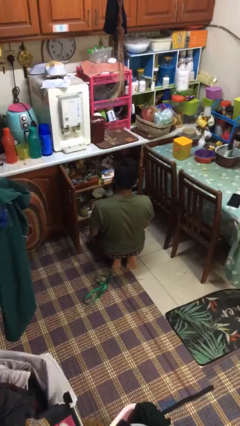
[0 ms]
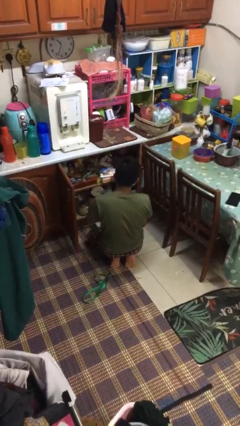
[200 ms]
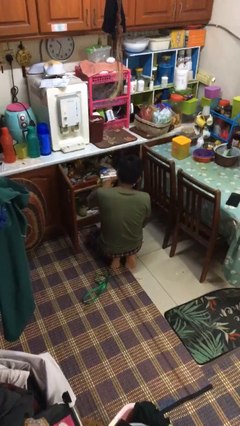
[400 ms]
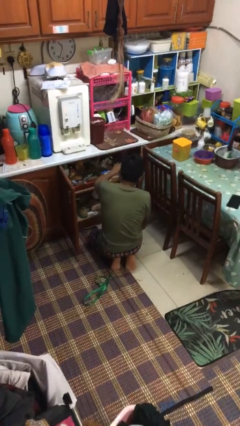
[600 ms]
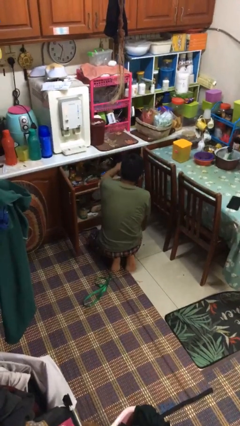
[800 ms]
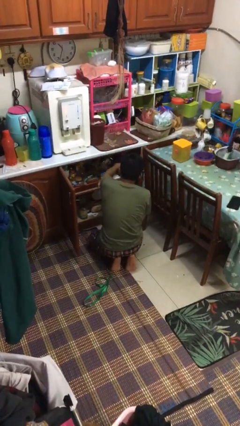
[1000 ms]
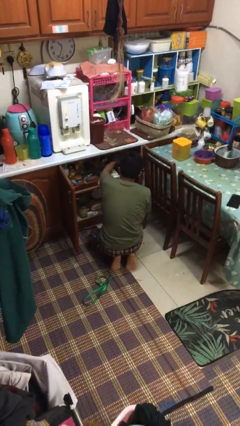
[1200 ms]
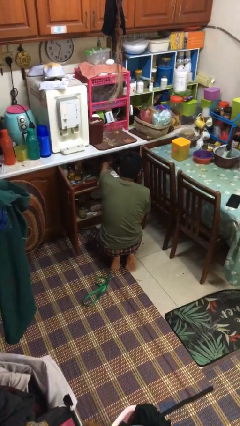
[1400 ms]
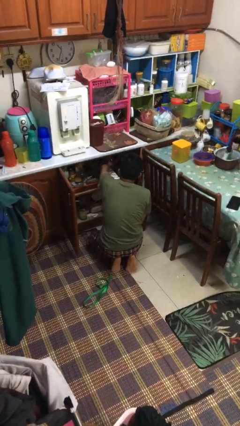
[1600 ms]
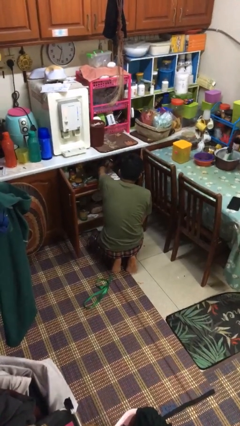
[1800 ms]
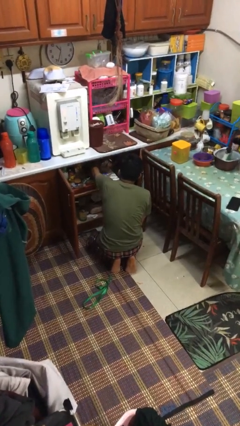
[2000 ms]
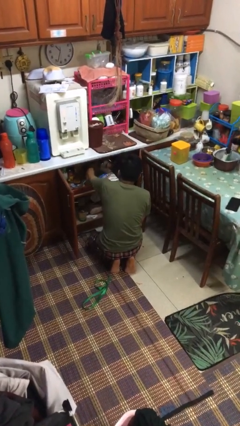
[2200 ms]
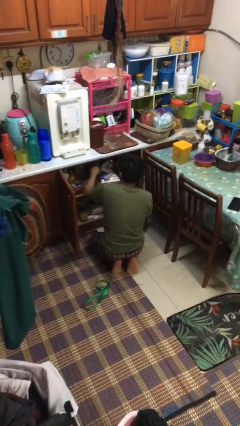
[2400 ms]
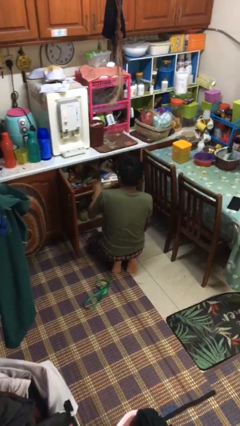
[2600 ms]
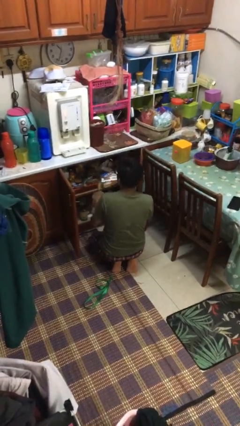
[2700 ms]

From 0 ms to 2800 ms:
person searches in kitchen drawer

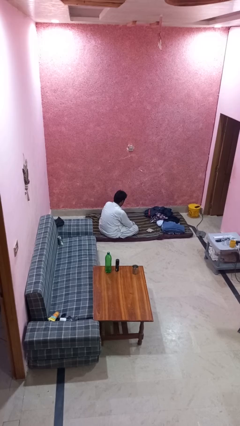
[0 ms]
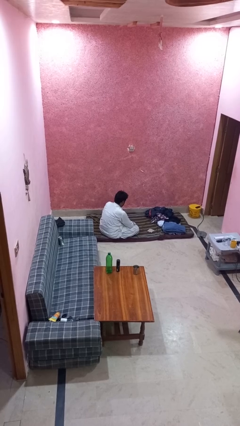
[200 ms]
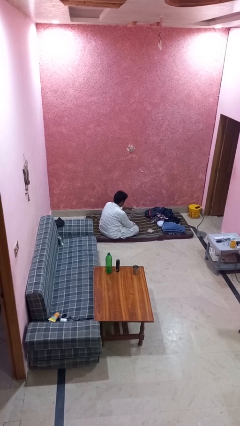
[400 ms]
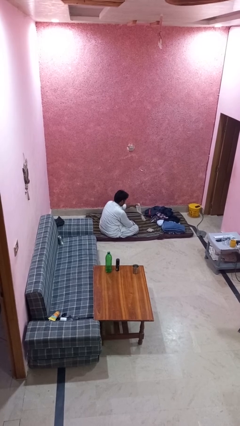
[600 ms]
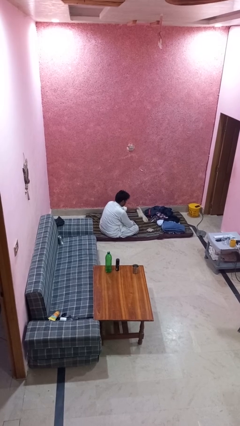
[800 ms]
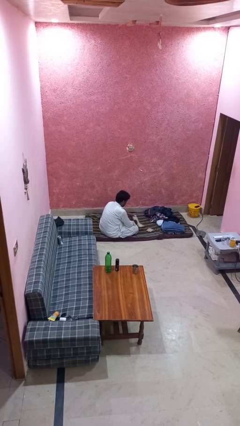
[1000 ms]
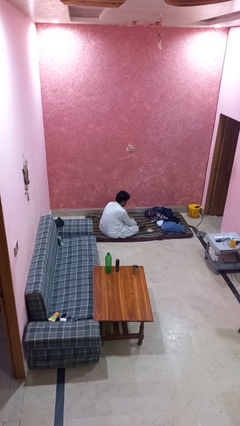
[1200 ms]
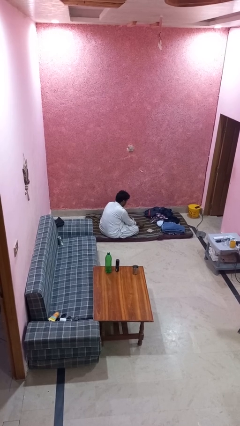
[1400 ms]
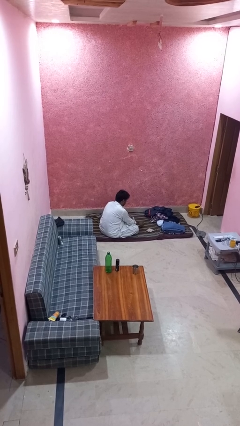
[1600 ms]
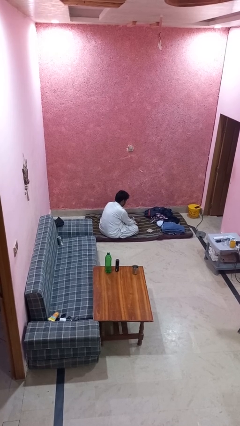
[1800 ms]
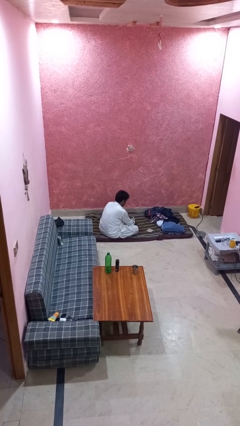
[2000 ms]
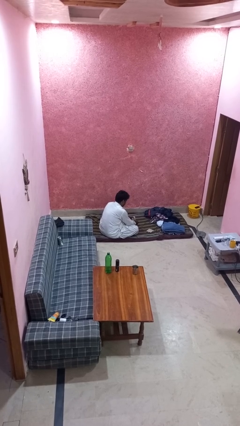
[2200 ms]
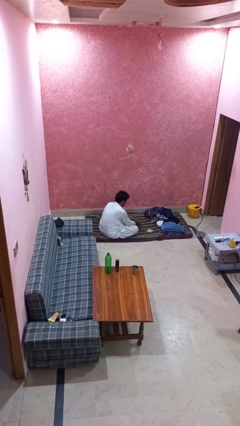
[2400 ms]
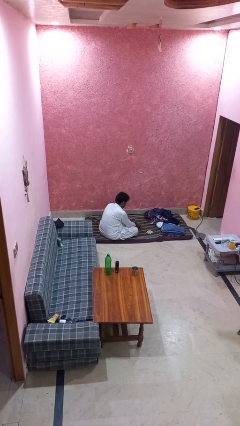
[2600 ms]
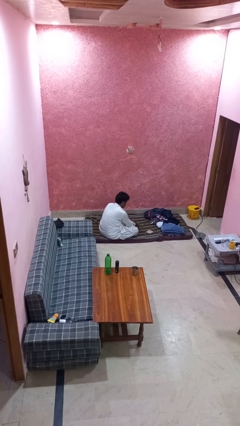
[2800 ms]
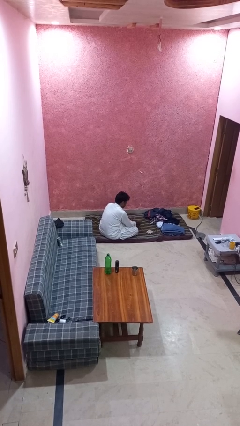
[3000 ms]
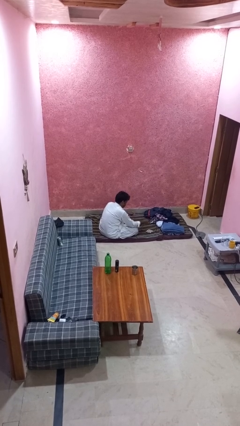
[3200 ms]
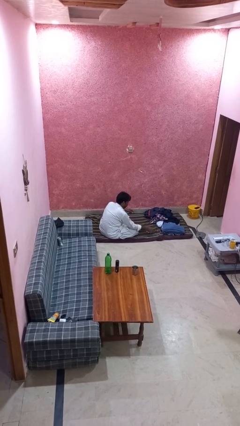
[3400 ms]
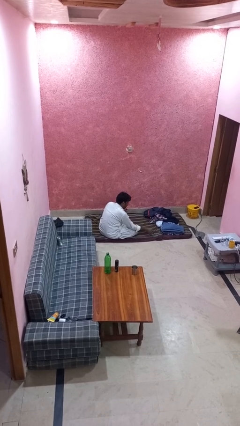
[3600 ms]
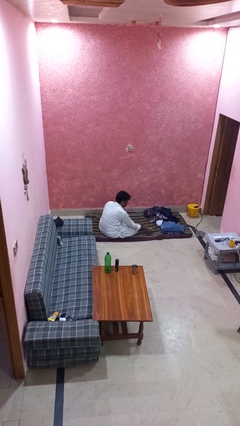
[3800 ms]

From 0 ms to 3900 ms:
person folds socks

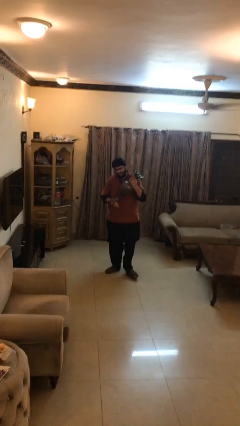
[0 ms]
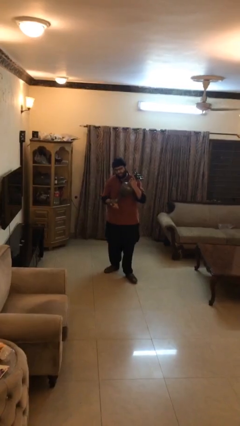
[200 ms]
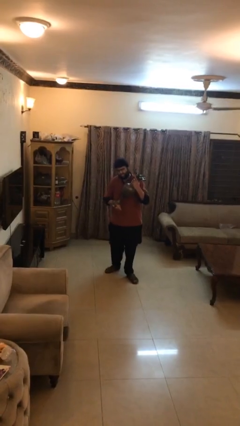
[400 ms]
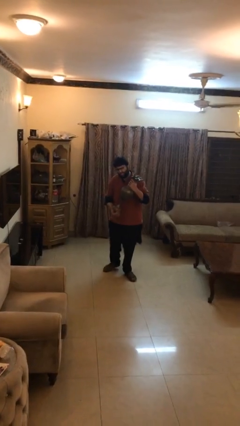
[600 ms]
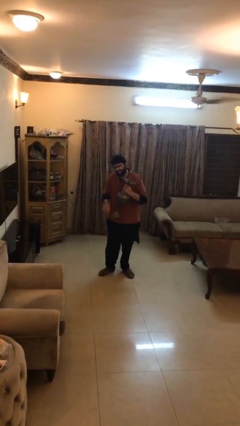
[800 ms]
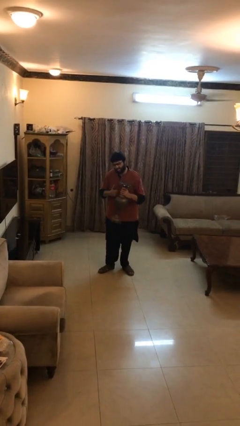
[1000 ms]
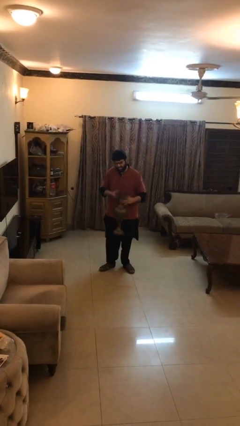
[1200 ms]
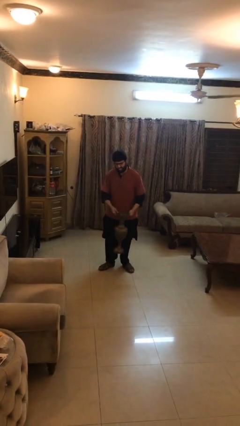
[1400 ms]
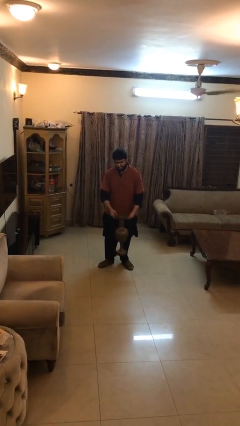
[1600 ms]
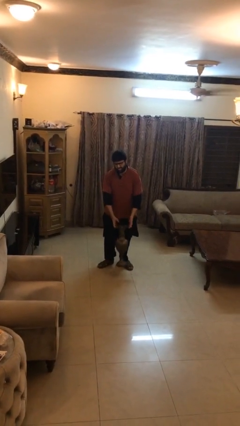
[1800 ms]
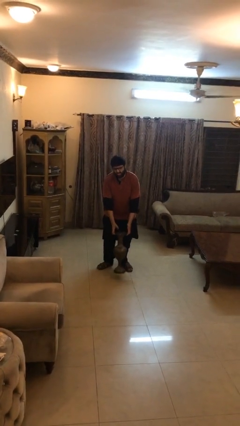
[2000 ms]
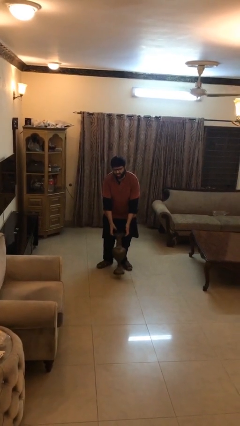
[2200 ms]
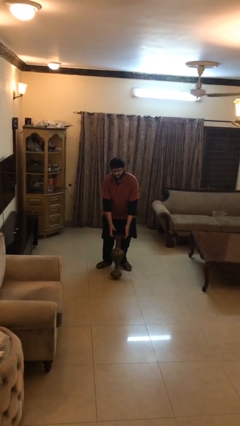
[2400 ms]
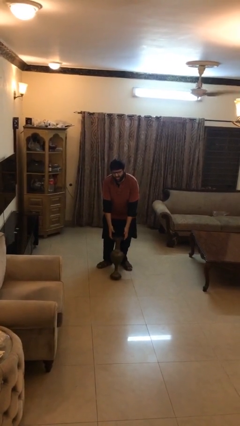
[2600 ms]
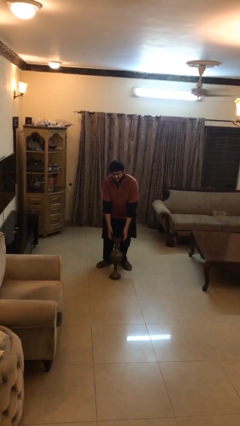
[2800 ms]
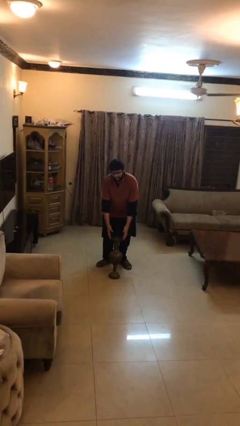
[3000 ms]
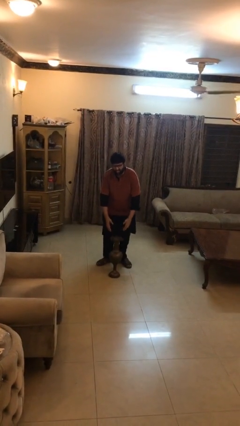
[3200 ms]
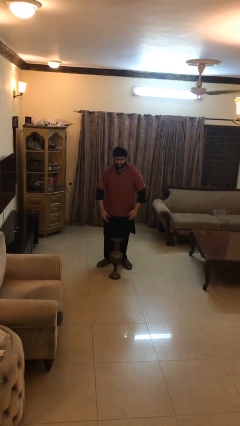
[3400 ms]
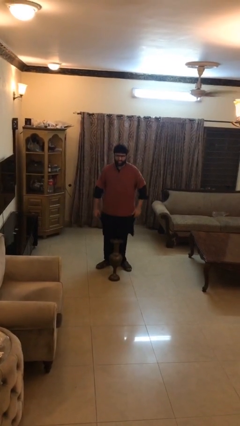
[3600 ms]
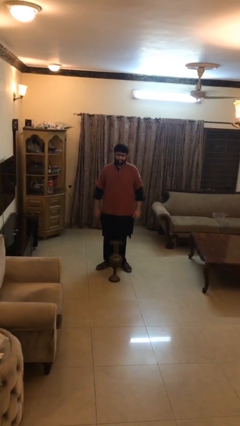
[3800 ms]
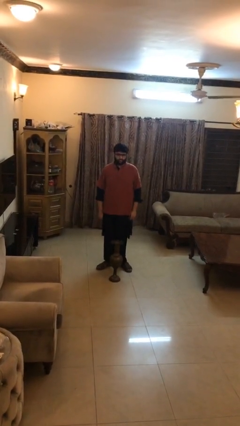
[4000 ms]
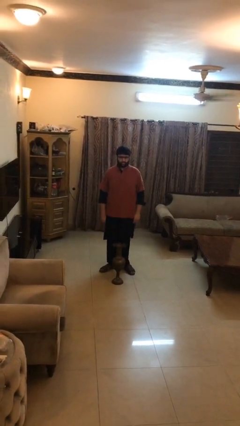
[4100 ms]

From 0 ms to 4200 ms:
person puts down object on floor

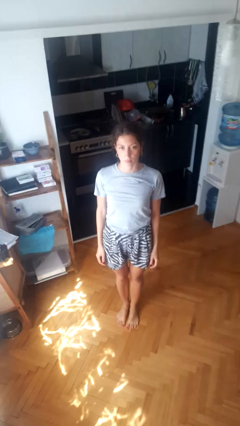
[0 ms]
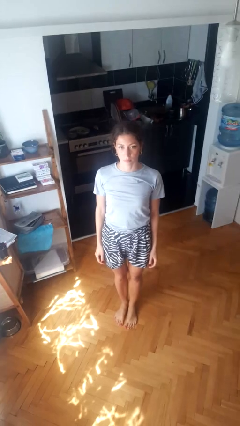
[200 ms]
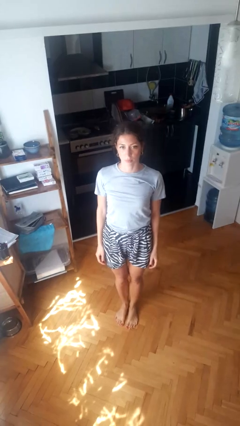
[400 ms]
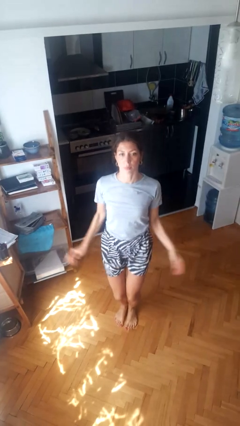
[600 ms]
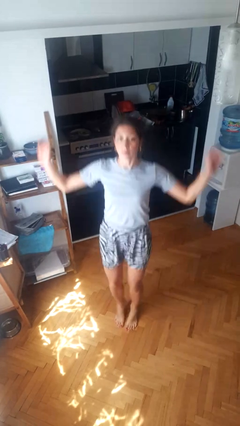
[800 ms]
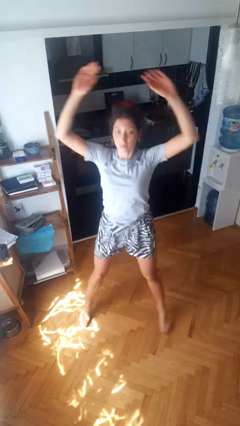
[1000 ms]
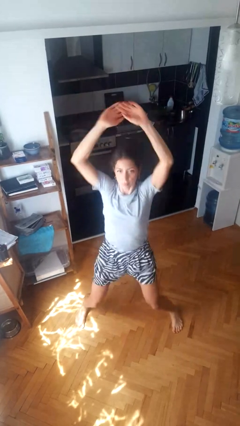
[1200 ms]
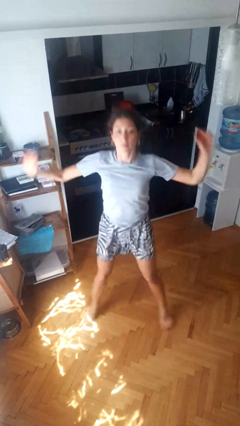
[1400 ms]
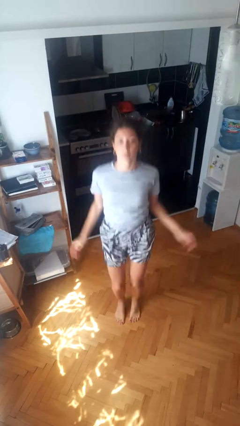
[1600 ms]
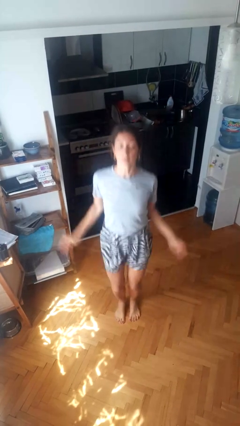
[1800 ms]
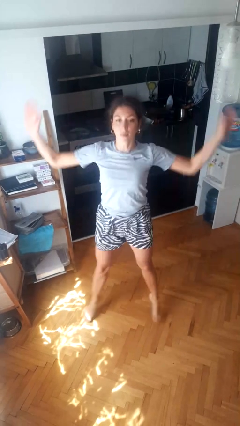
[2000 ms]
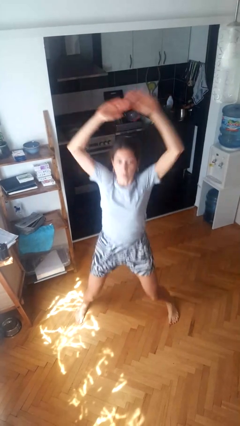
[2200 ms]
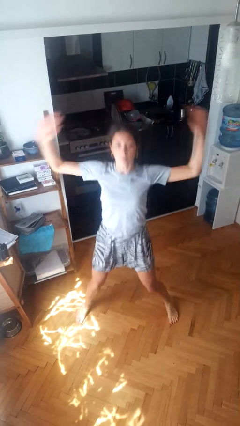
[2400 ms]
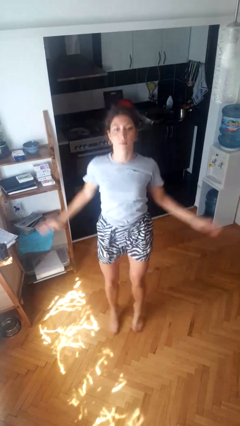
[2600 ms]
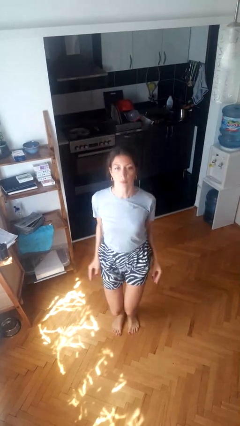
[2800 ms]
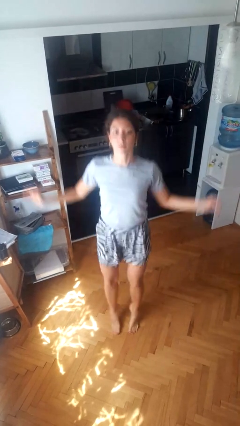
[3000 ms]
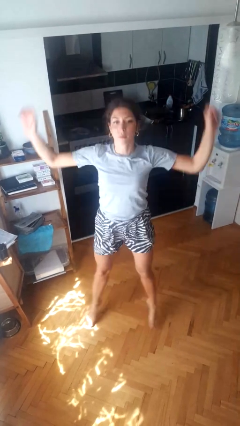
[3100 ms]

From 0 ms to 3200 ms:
person exercises with jumping jacks

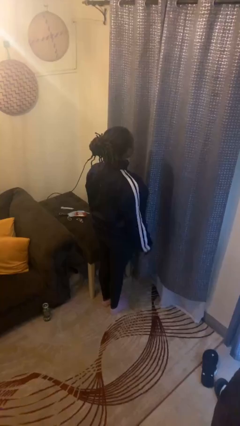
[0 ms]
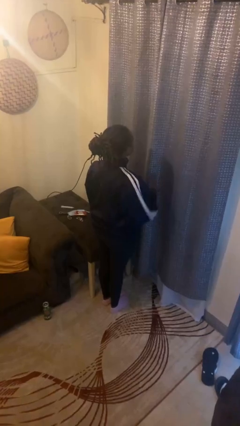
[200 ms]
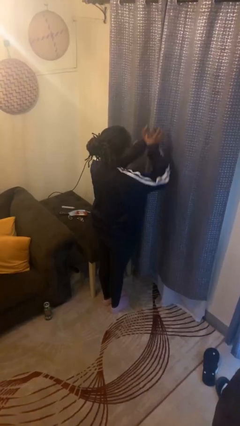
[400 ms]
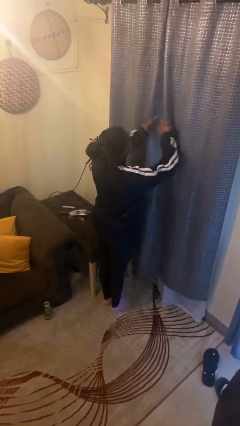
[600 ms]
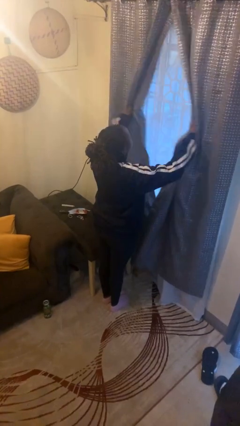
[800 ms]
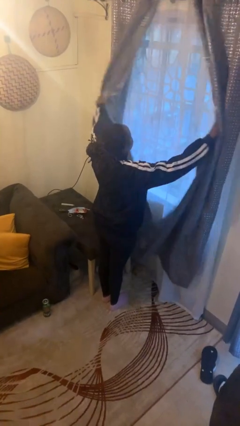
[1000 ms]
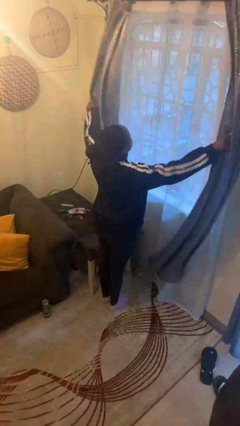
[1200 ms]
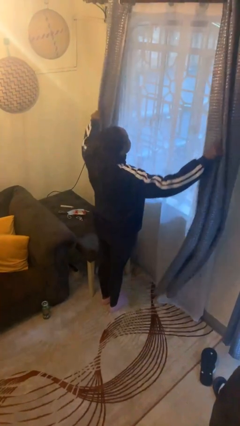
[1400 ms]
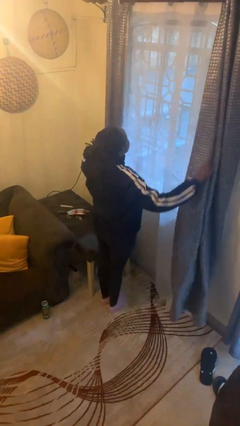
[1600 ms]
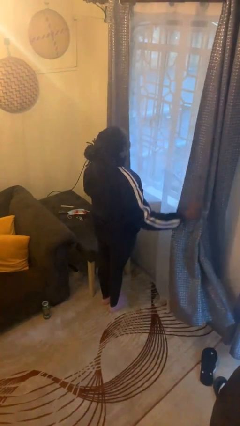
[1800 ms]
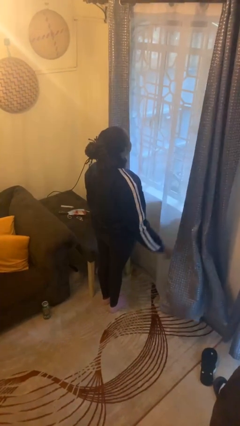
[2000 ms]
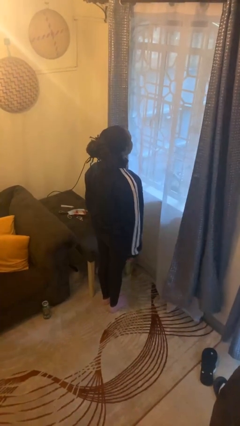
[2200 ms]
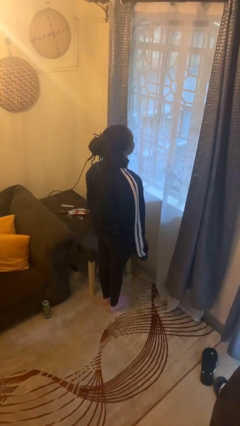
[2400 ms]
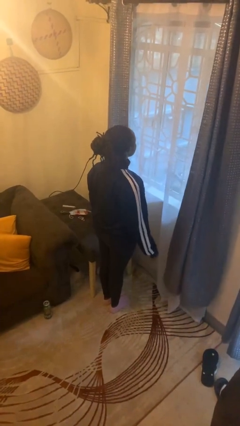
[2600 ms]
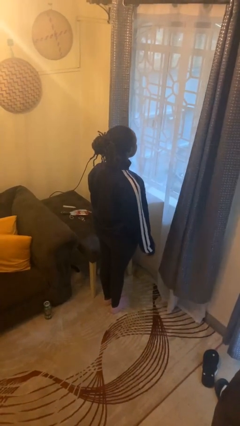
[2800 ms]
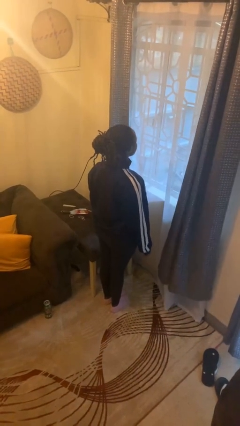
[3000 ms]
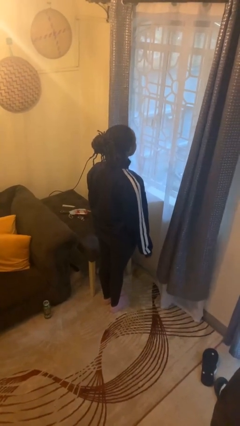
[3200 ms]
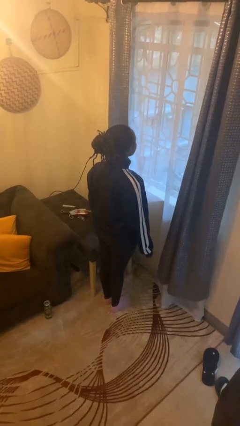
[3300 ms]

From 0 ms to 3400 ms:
person opens curtains
